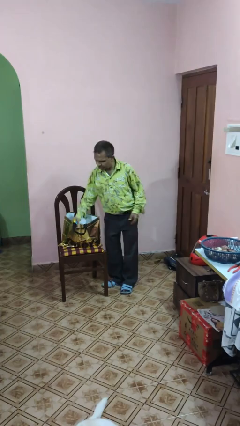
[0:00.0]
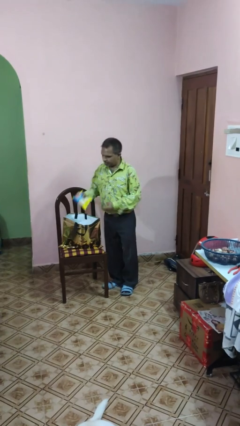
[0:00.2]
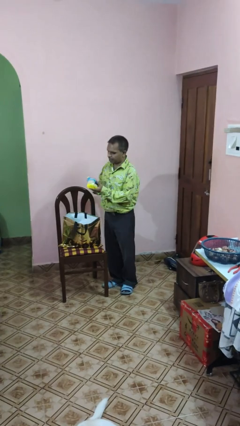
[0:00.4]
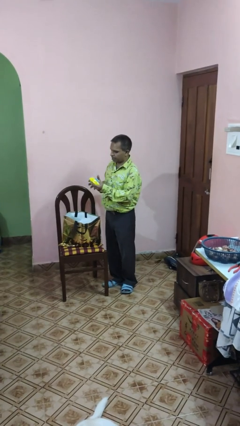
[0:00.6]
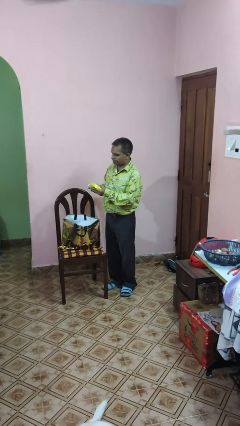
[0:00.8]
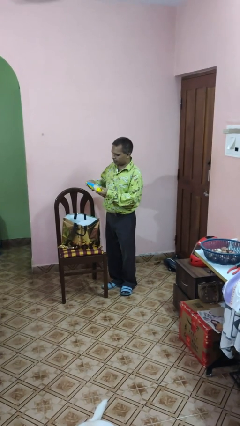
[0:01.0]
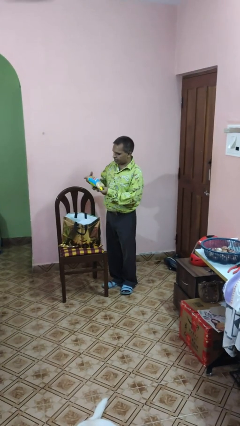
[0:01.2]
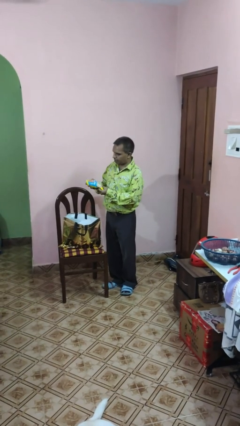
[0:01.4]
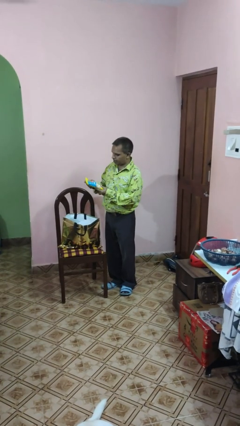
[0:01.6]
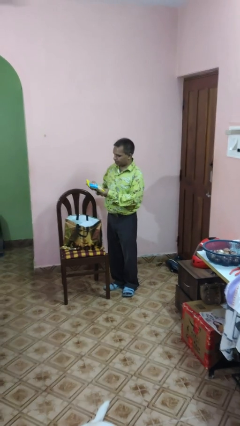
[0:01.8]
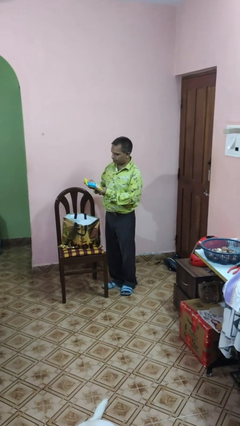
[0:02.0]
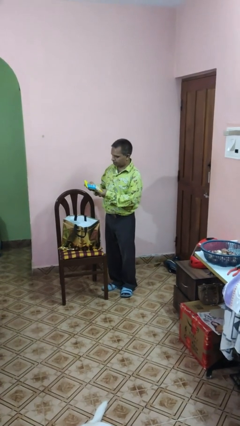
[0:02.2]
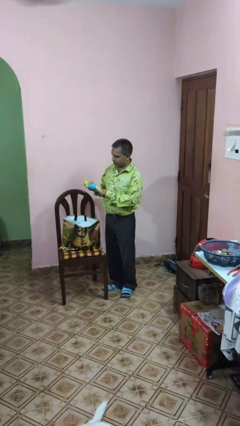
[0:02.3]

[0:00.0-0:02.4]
person takes object from bag

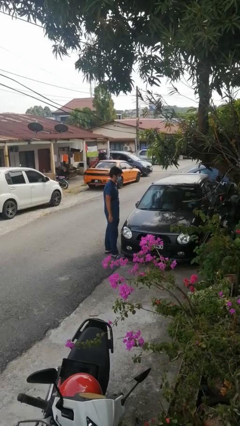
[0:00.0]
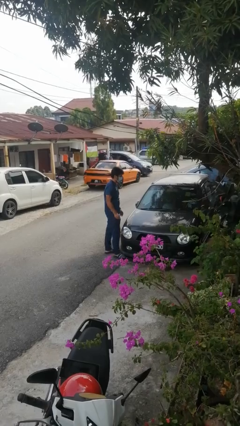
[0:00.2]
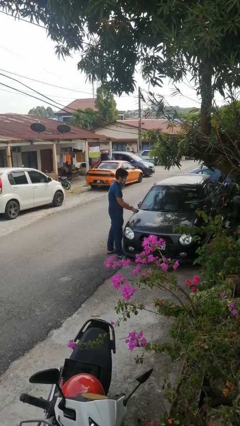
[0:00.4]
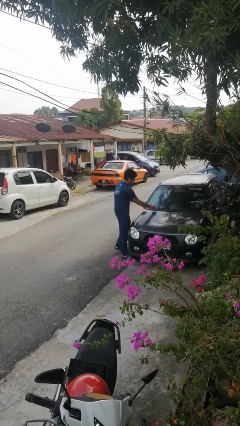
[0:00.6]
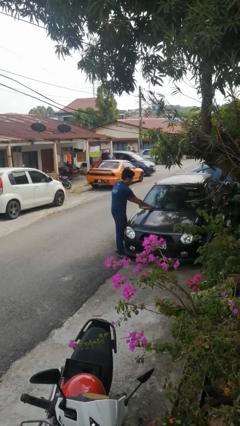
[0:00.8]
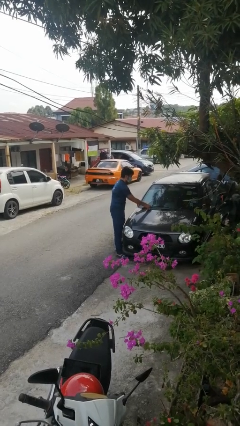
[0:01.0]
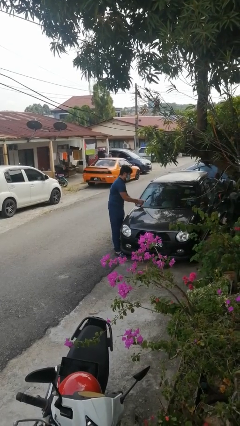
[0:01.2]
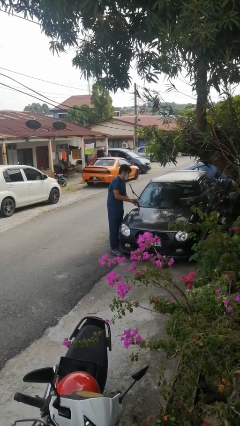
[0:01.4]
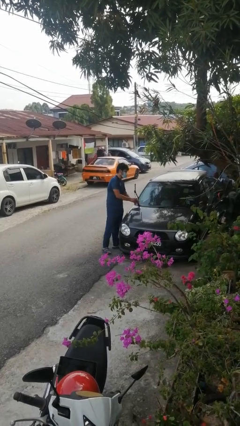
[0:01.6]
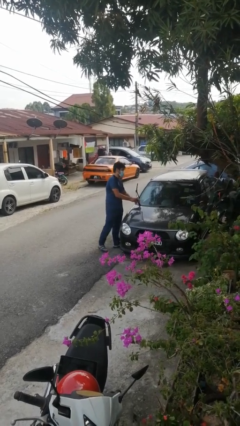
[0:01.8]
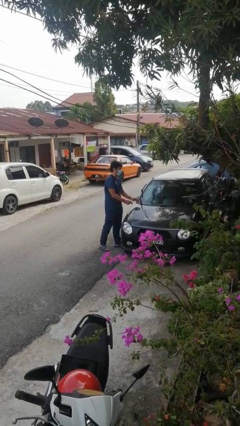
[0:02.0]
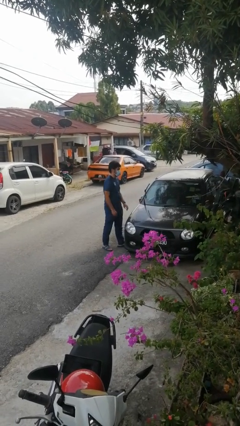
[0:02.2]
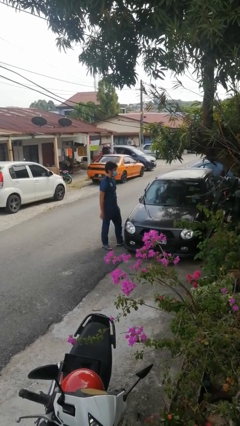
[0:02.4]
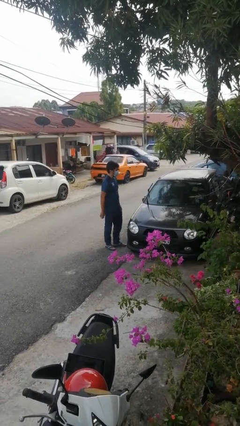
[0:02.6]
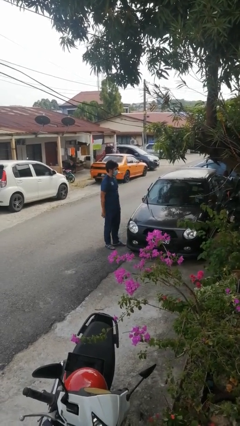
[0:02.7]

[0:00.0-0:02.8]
person flips up car wipers

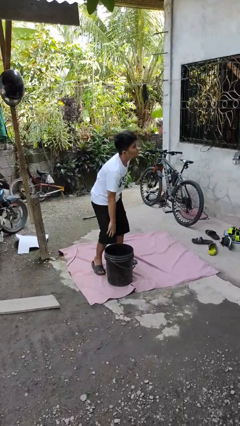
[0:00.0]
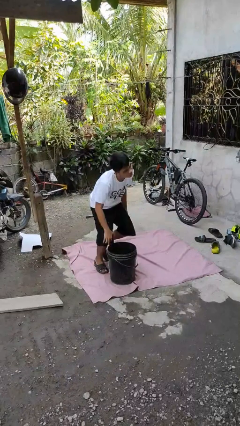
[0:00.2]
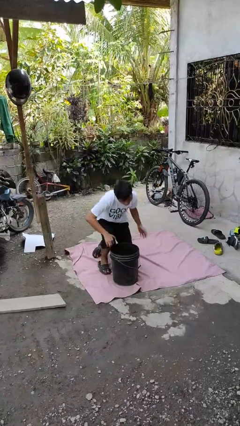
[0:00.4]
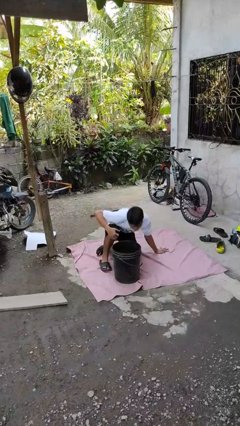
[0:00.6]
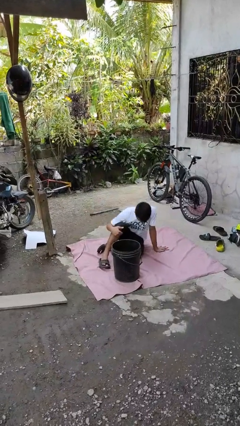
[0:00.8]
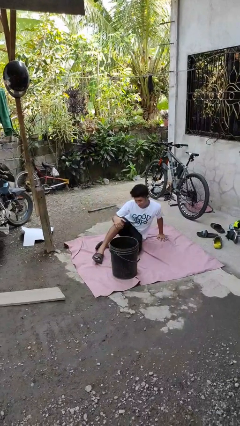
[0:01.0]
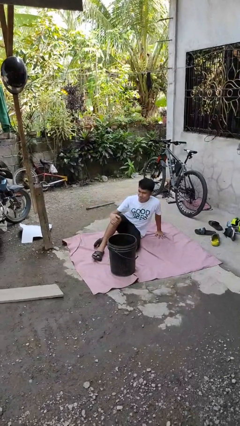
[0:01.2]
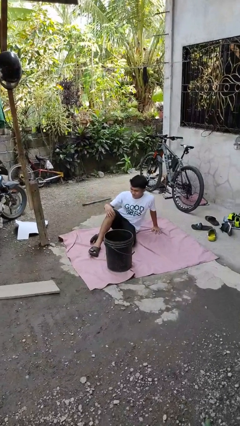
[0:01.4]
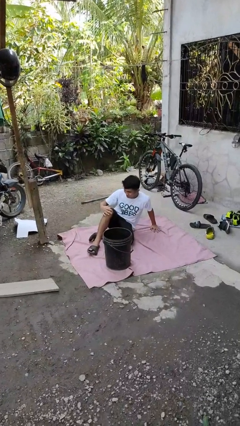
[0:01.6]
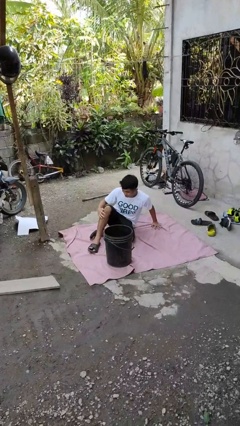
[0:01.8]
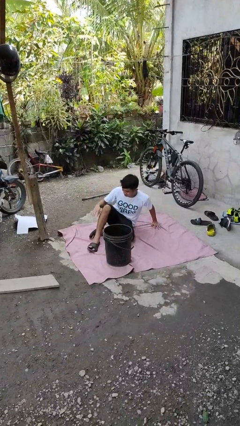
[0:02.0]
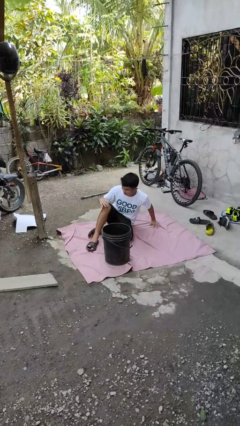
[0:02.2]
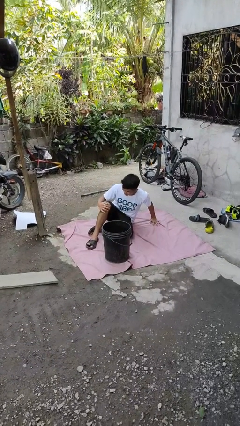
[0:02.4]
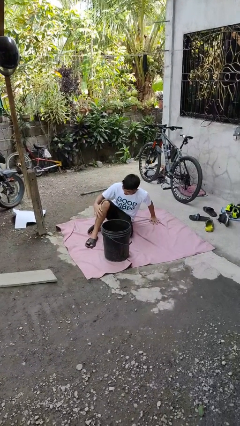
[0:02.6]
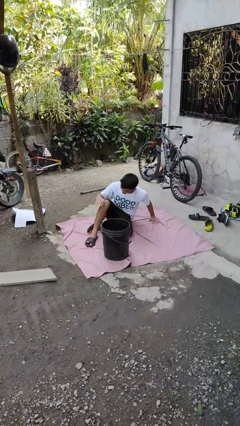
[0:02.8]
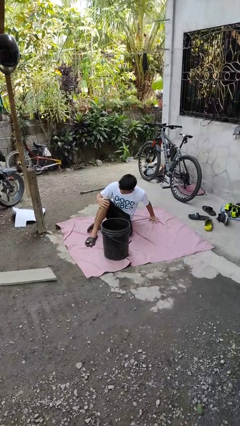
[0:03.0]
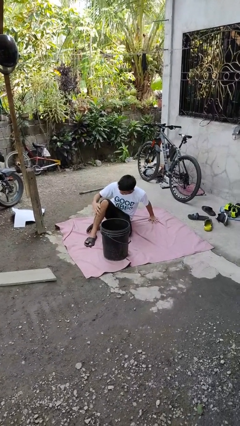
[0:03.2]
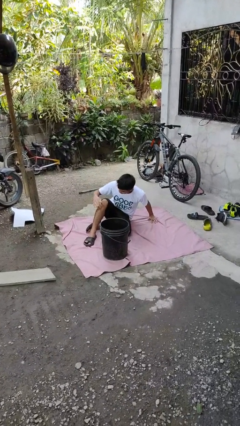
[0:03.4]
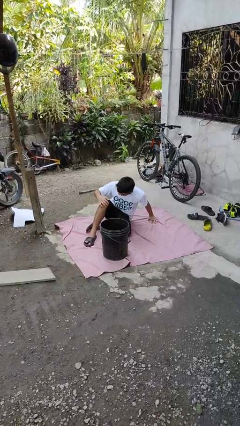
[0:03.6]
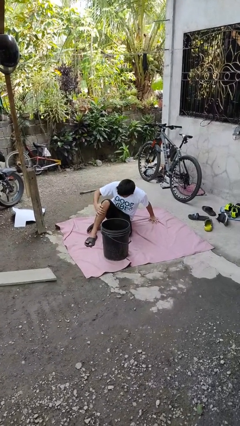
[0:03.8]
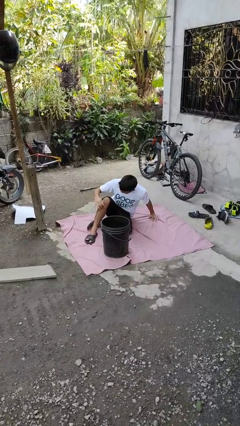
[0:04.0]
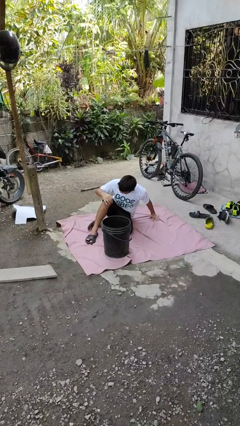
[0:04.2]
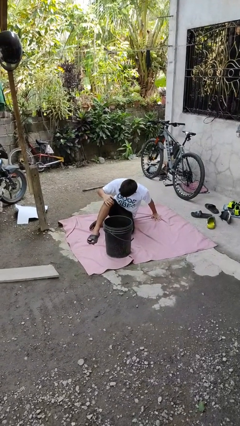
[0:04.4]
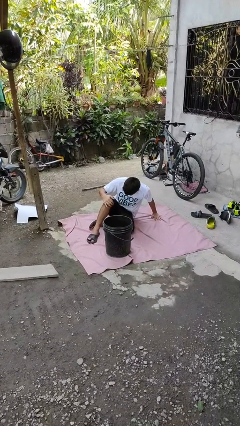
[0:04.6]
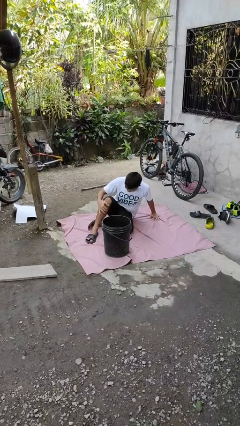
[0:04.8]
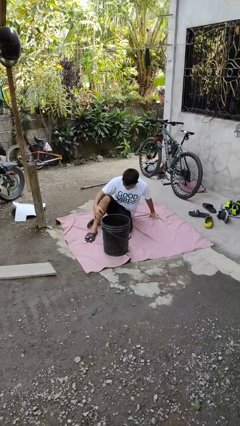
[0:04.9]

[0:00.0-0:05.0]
person lies down on floor

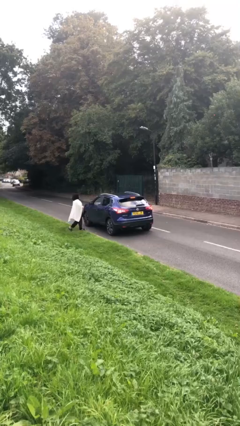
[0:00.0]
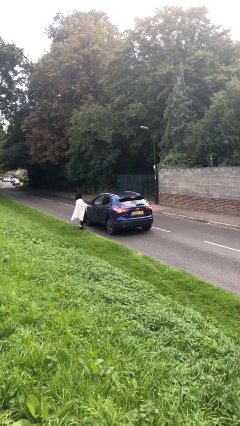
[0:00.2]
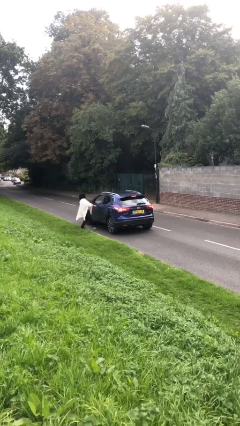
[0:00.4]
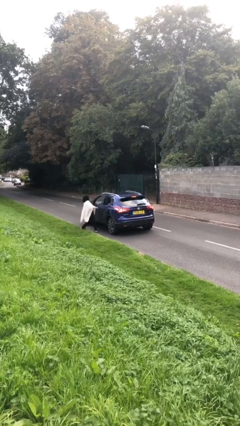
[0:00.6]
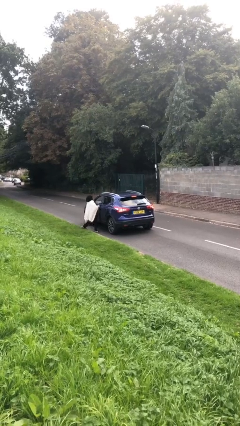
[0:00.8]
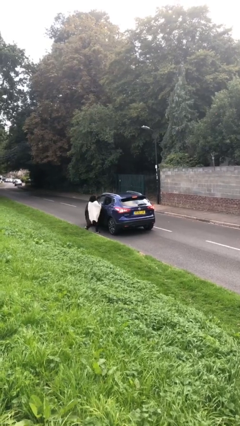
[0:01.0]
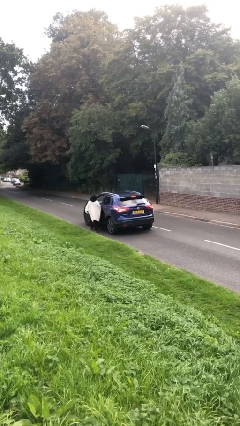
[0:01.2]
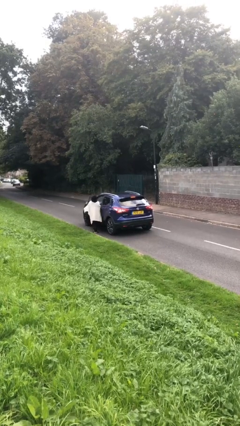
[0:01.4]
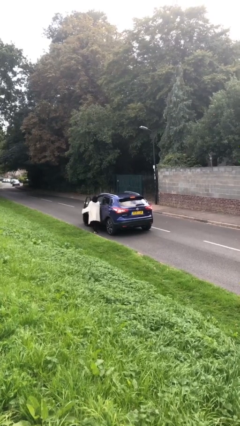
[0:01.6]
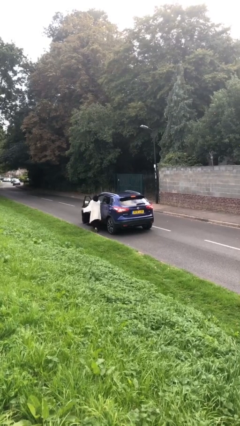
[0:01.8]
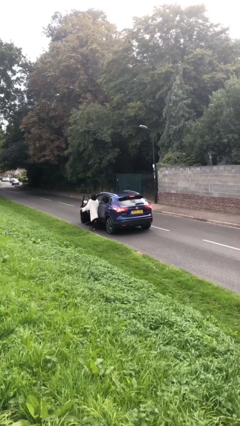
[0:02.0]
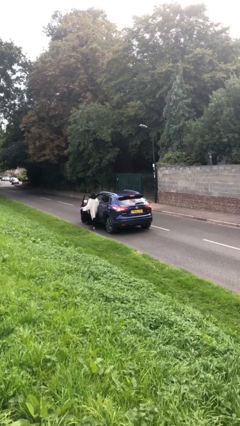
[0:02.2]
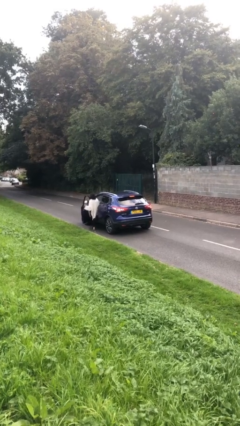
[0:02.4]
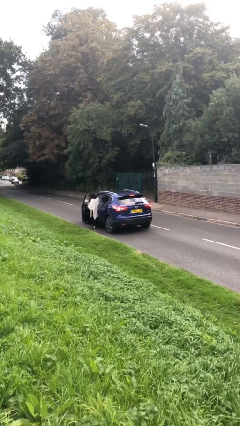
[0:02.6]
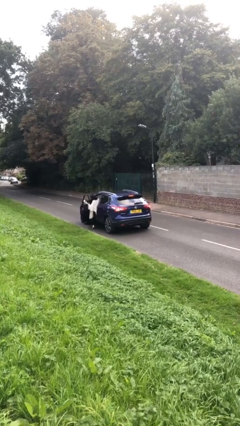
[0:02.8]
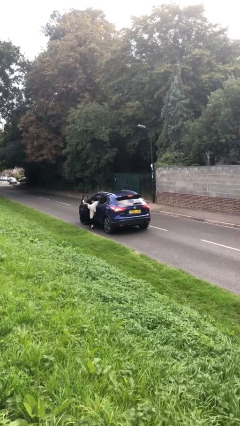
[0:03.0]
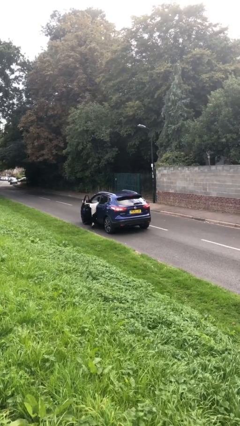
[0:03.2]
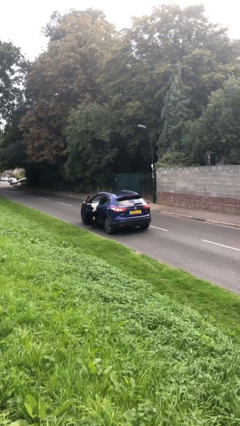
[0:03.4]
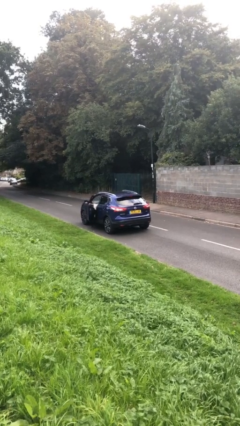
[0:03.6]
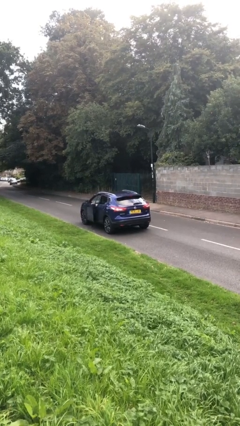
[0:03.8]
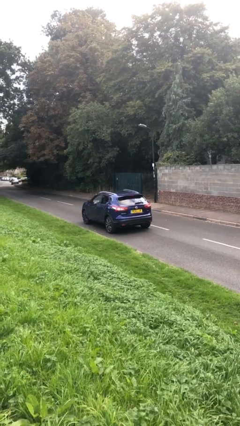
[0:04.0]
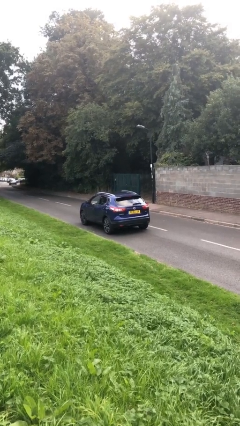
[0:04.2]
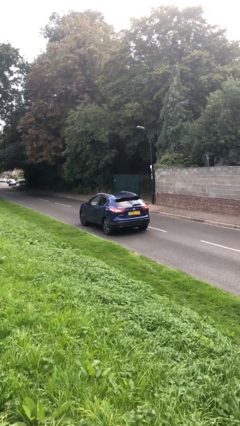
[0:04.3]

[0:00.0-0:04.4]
car picks up person

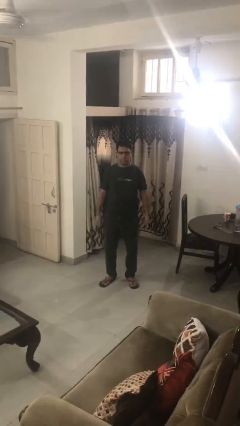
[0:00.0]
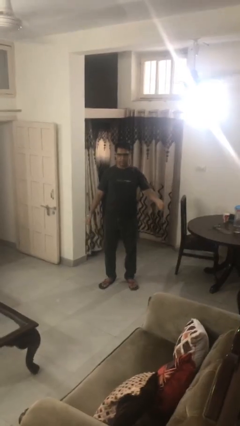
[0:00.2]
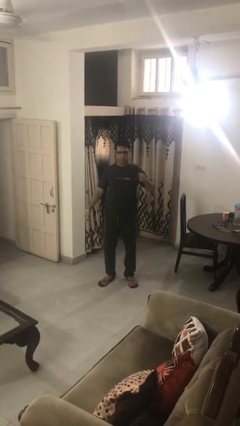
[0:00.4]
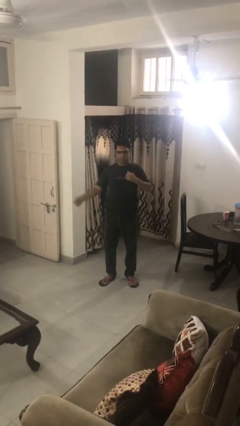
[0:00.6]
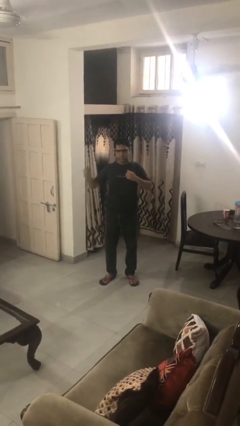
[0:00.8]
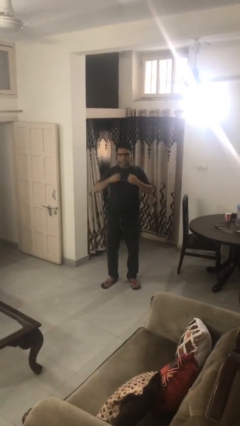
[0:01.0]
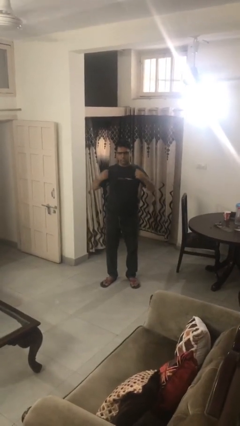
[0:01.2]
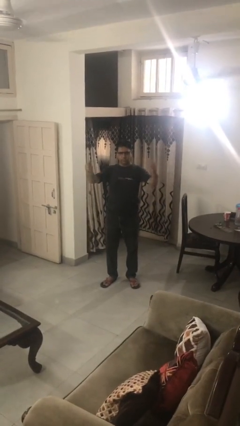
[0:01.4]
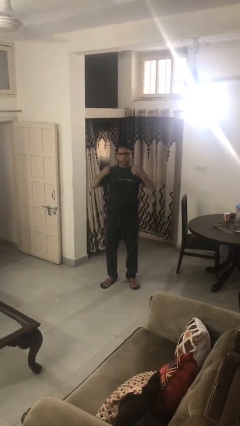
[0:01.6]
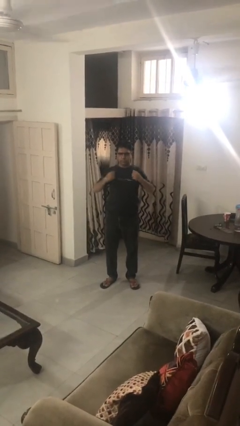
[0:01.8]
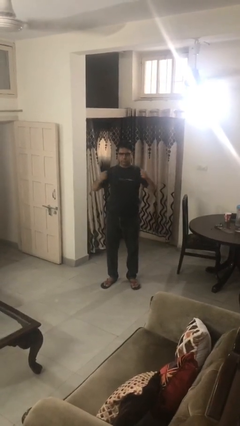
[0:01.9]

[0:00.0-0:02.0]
person drums on chest

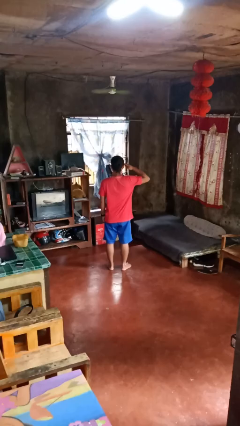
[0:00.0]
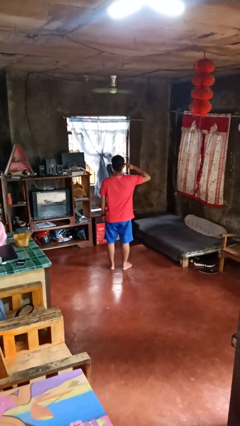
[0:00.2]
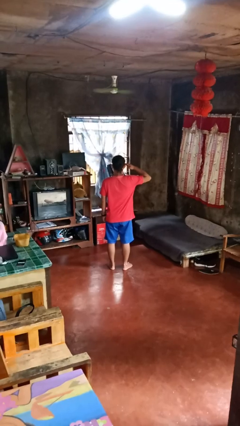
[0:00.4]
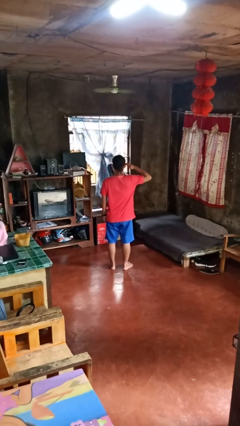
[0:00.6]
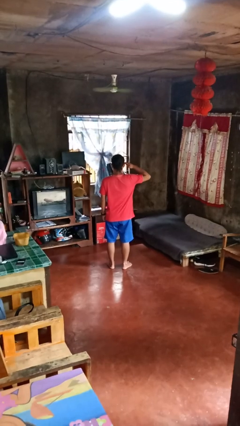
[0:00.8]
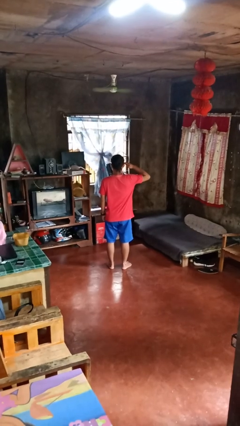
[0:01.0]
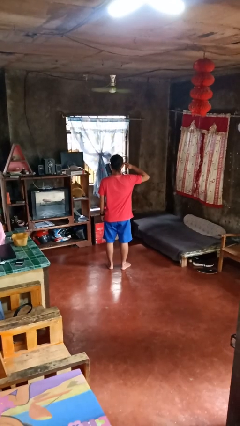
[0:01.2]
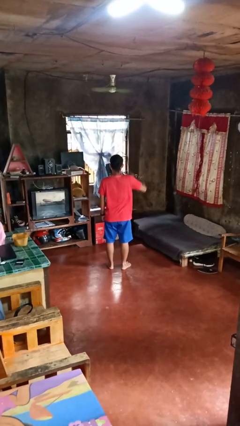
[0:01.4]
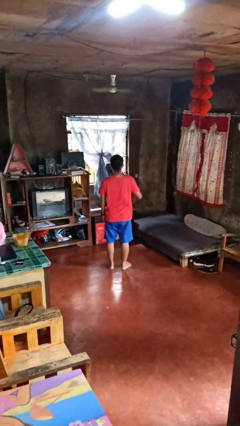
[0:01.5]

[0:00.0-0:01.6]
person salutes
